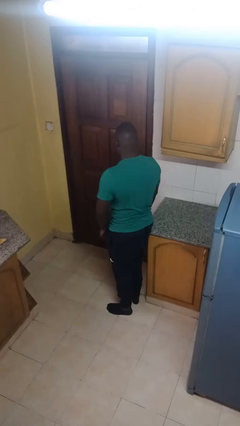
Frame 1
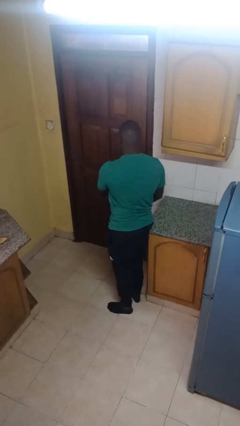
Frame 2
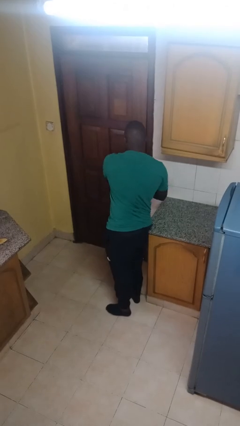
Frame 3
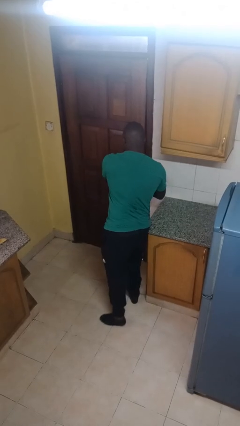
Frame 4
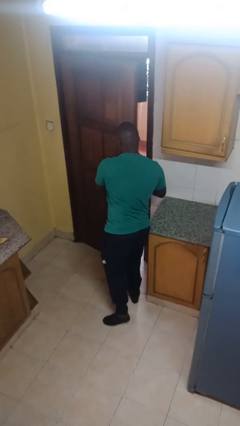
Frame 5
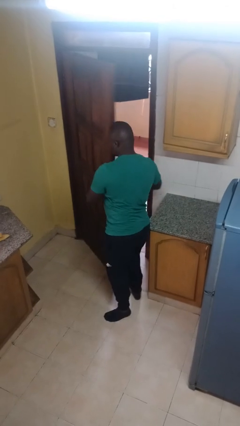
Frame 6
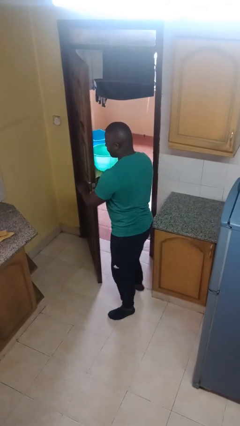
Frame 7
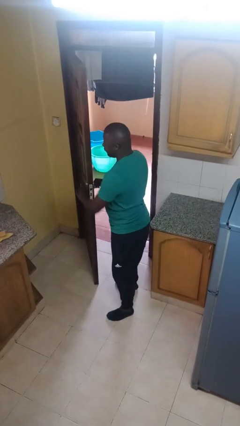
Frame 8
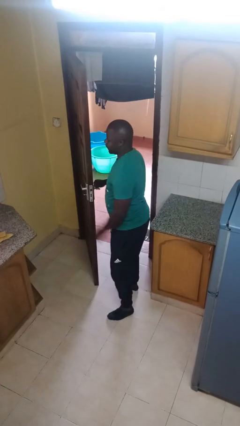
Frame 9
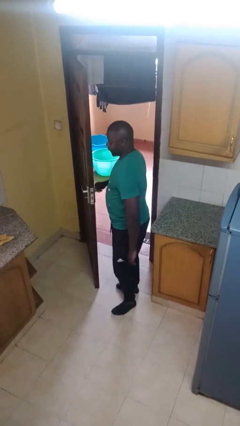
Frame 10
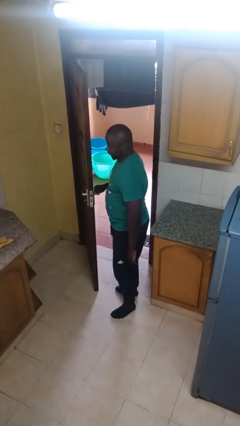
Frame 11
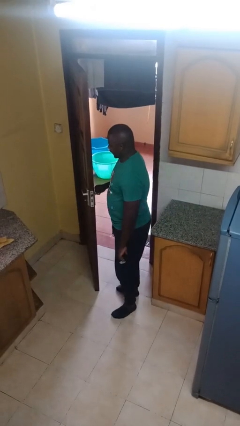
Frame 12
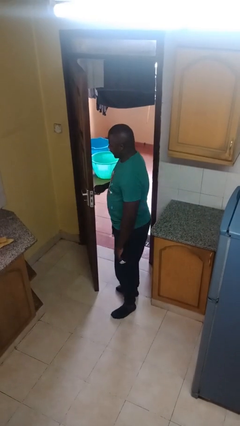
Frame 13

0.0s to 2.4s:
person opens facility door

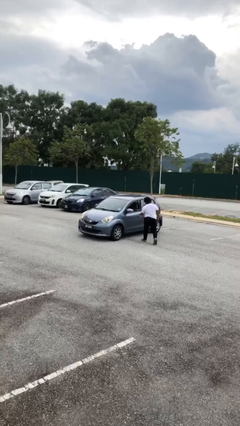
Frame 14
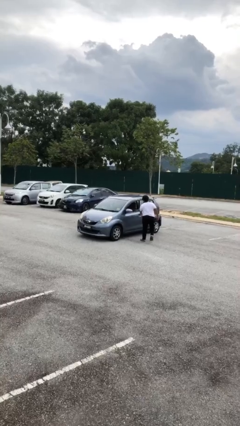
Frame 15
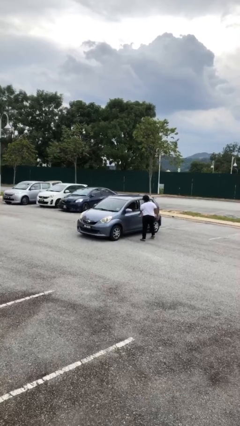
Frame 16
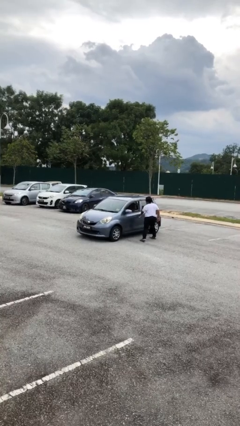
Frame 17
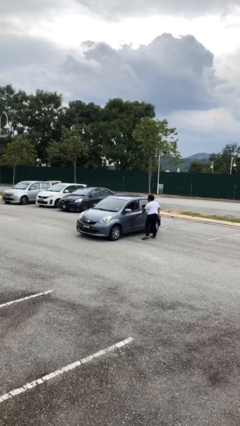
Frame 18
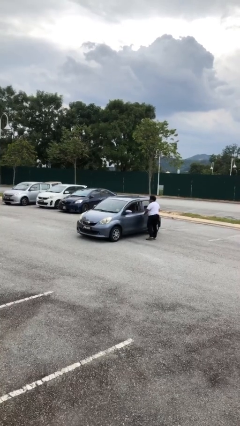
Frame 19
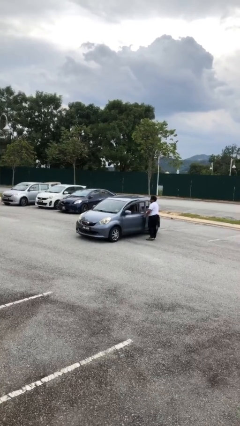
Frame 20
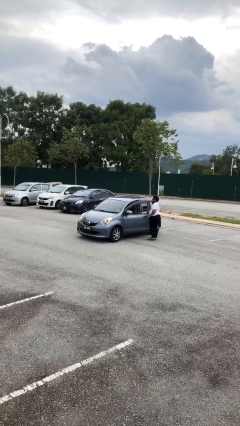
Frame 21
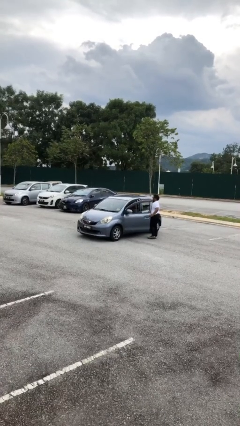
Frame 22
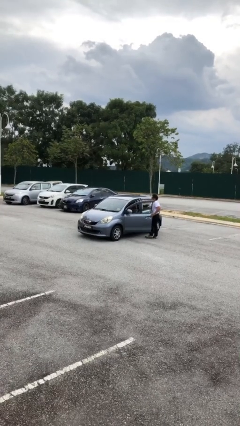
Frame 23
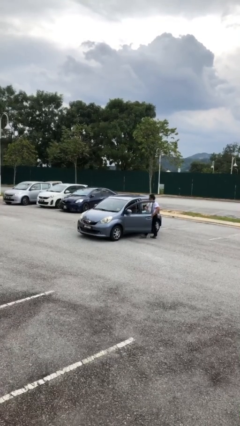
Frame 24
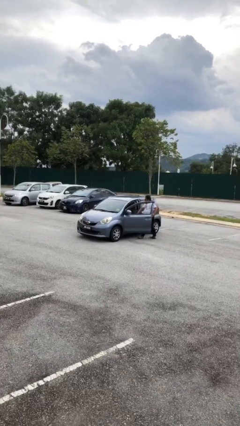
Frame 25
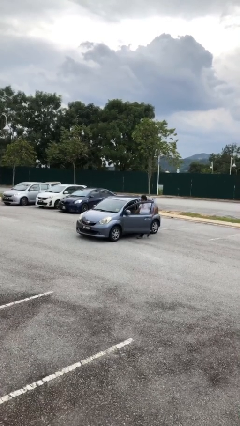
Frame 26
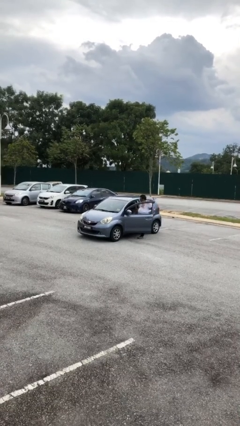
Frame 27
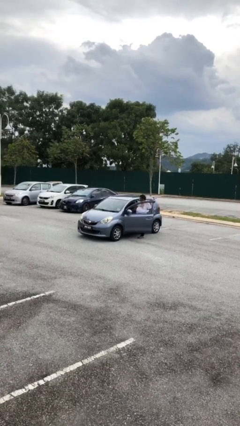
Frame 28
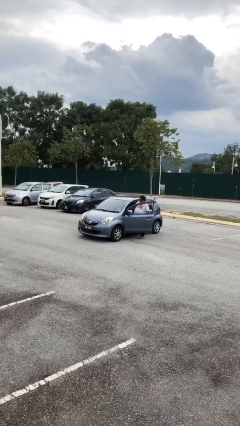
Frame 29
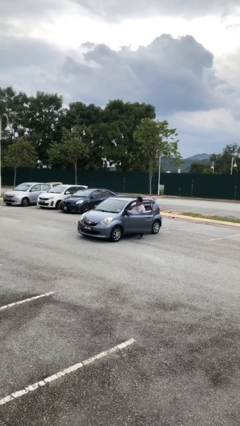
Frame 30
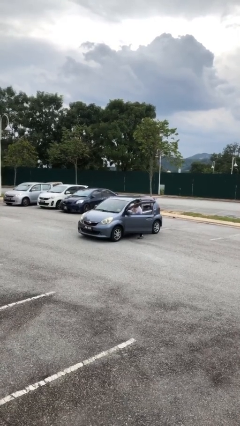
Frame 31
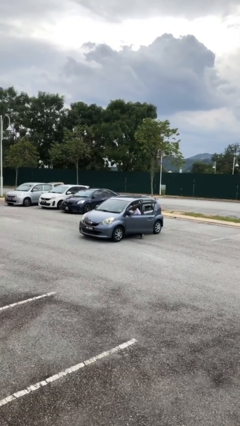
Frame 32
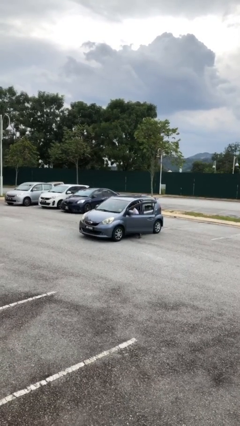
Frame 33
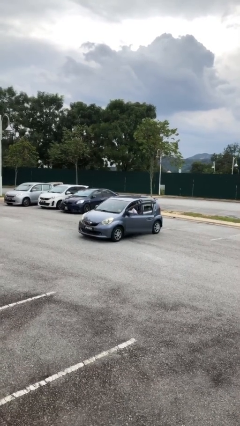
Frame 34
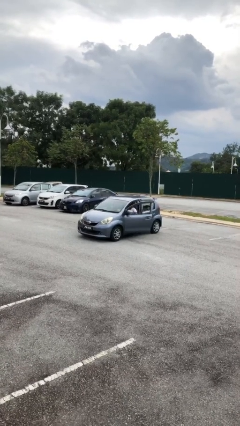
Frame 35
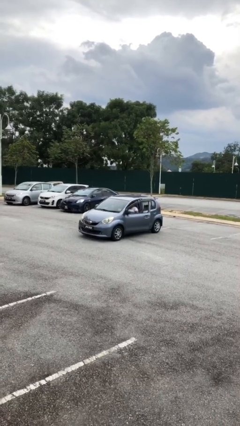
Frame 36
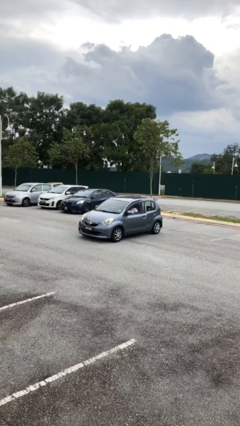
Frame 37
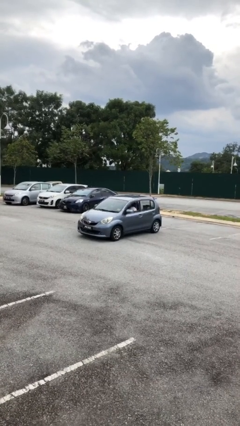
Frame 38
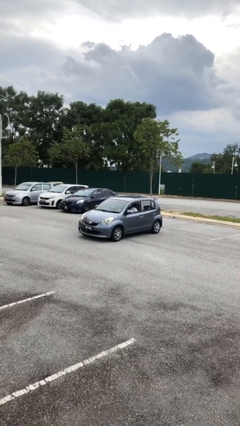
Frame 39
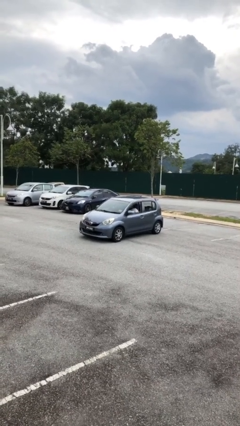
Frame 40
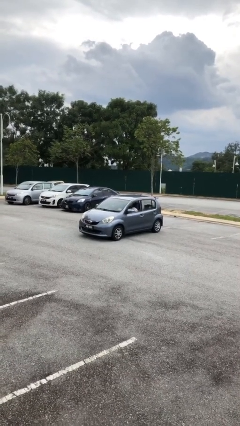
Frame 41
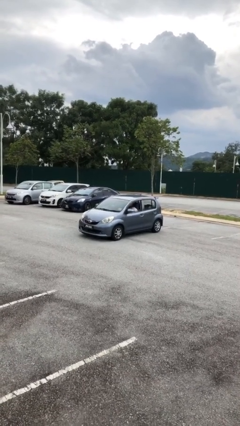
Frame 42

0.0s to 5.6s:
car picks up person

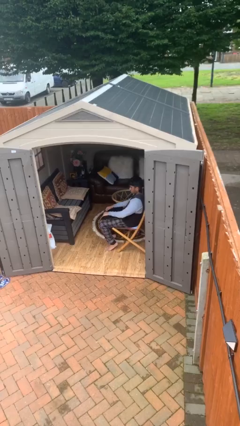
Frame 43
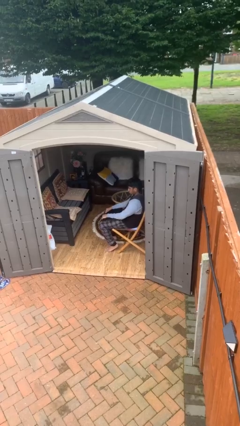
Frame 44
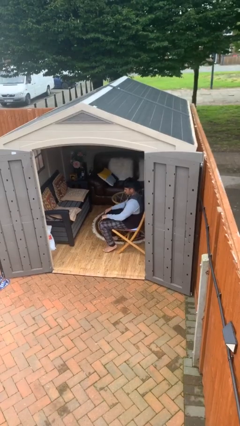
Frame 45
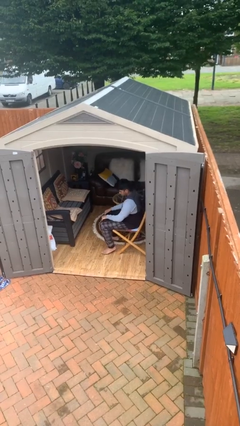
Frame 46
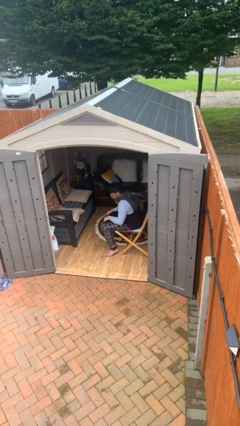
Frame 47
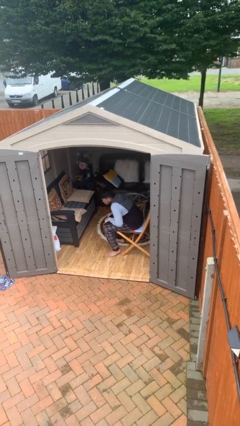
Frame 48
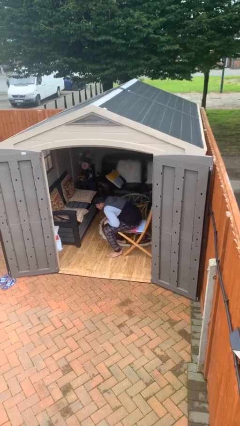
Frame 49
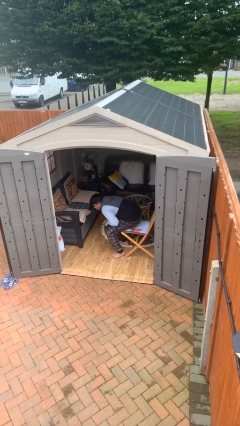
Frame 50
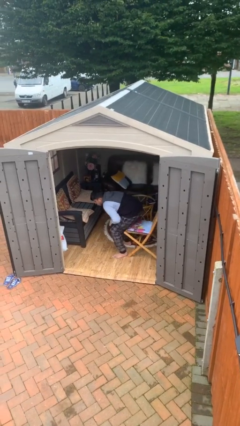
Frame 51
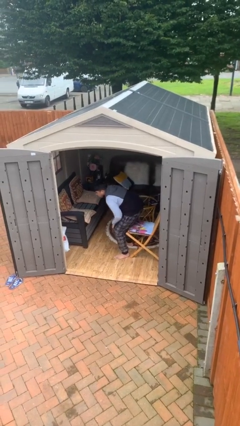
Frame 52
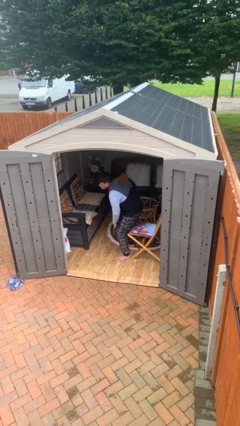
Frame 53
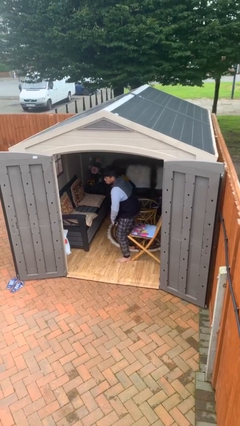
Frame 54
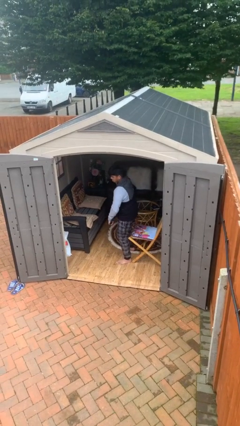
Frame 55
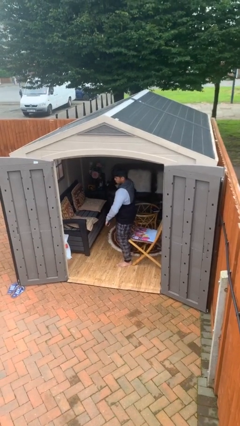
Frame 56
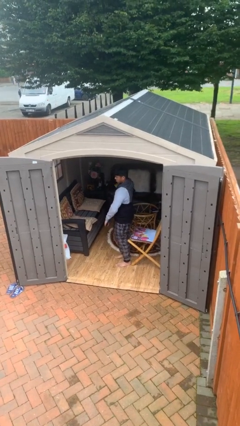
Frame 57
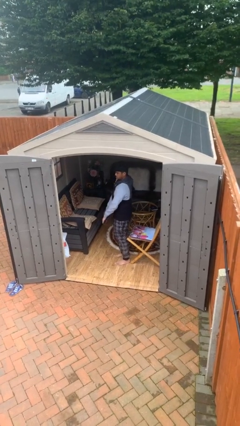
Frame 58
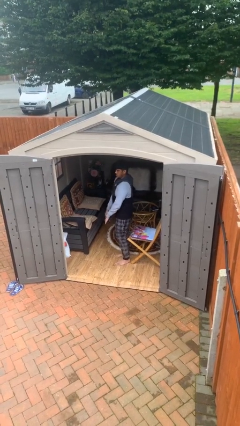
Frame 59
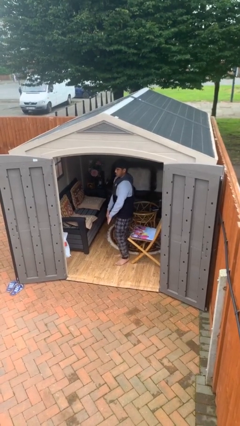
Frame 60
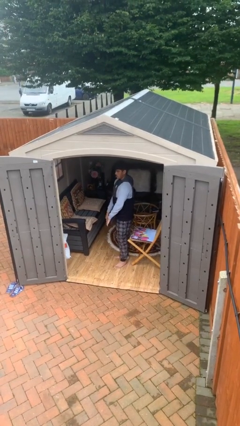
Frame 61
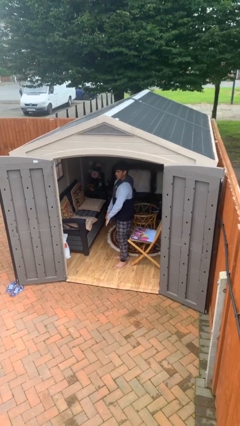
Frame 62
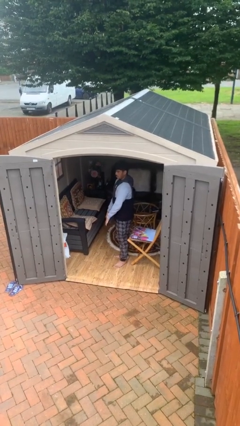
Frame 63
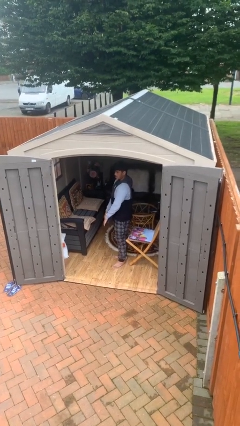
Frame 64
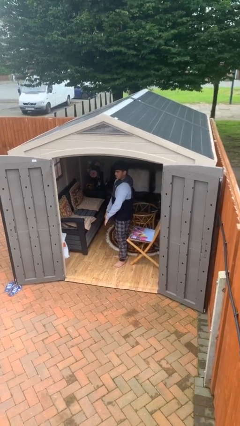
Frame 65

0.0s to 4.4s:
person stands up

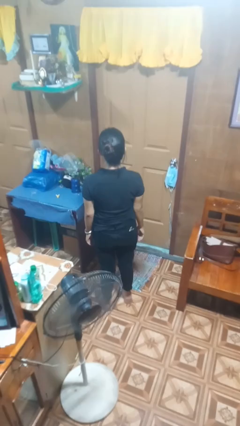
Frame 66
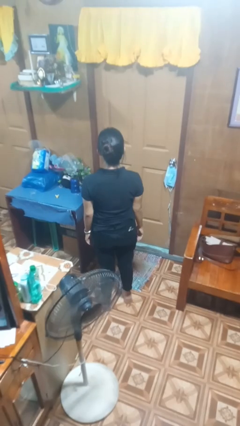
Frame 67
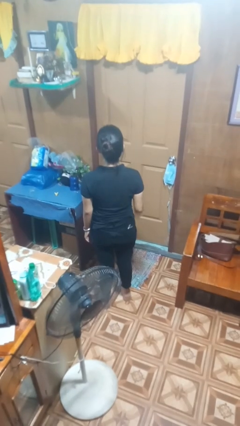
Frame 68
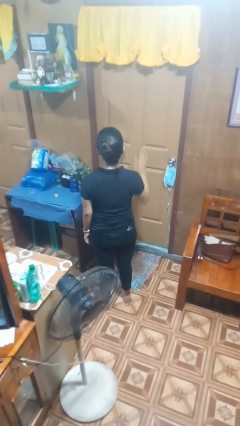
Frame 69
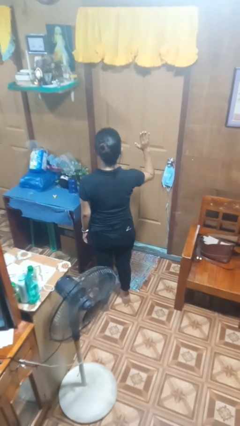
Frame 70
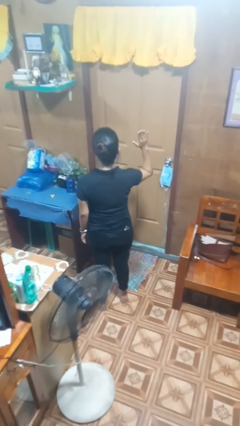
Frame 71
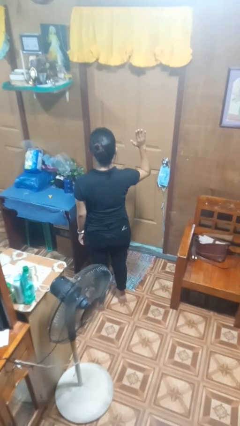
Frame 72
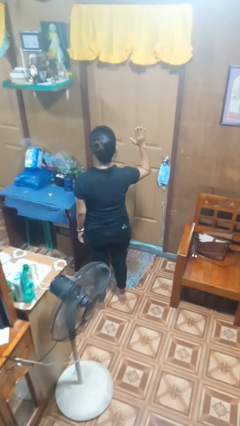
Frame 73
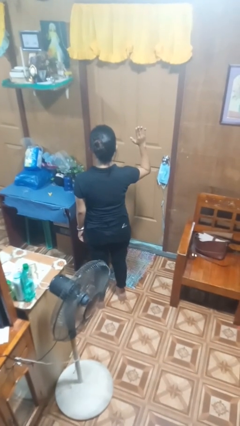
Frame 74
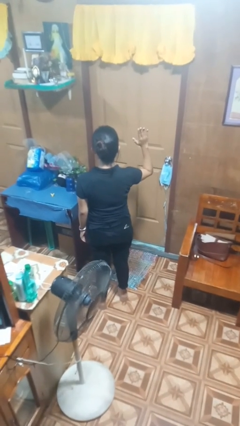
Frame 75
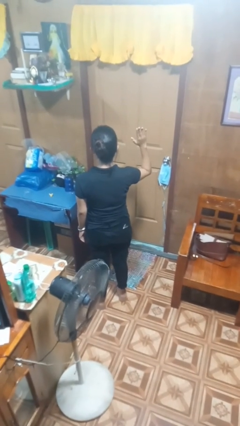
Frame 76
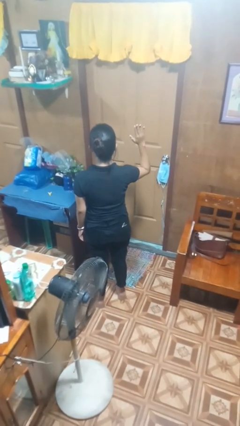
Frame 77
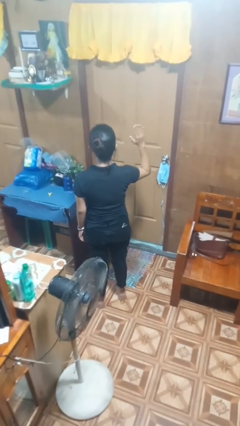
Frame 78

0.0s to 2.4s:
person gestures raise hand

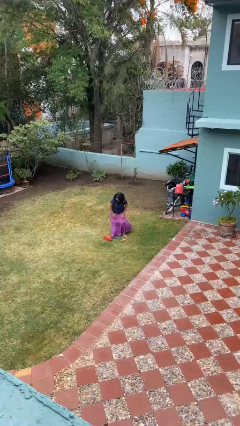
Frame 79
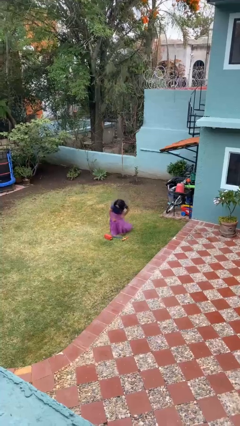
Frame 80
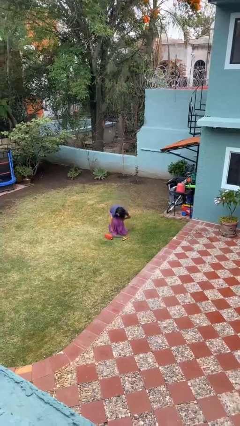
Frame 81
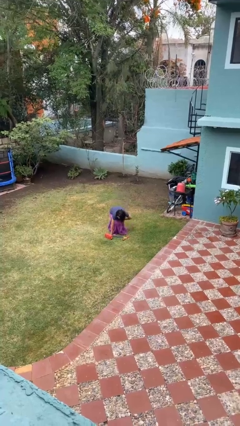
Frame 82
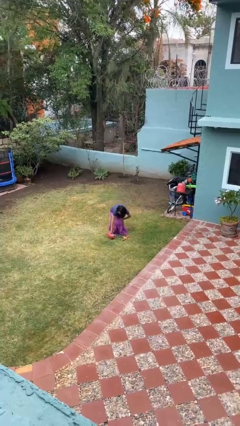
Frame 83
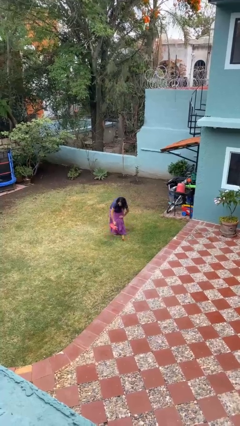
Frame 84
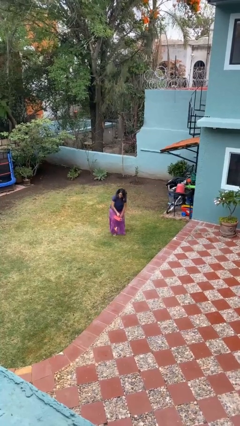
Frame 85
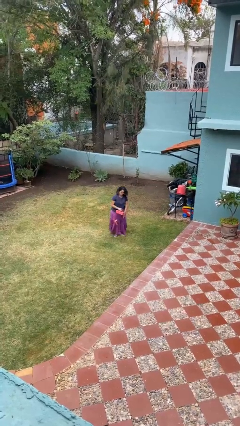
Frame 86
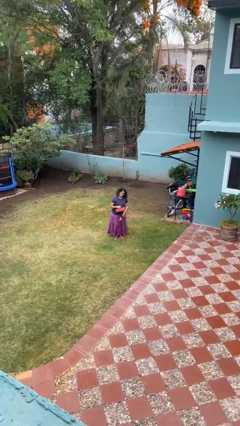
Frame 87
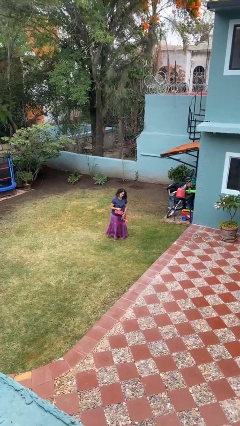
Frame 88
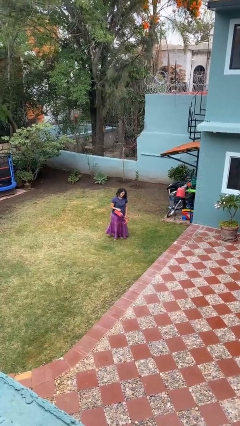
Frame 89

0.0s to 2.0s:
person picks up object from floor

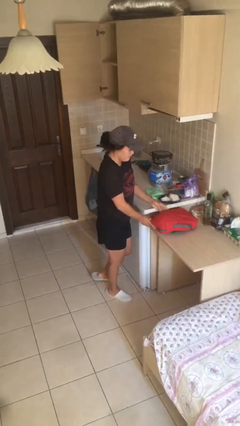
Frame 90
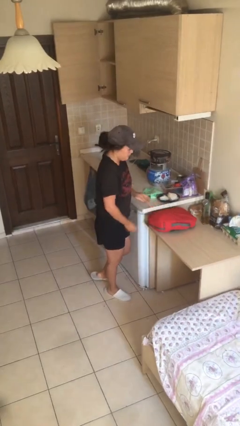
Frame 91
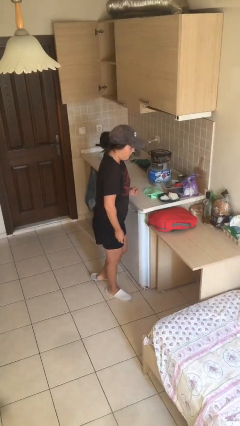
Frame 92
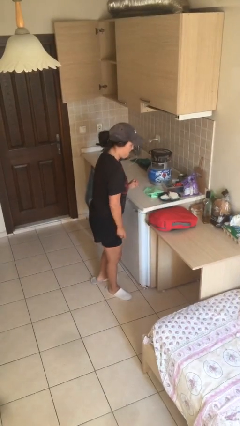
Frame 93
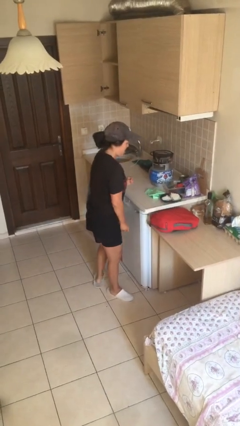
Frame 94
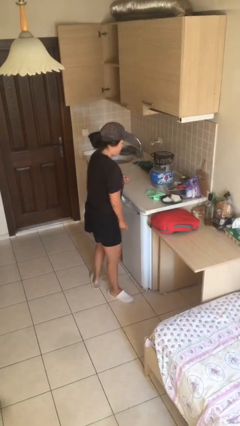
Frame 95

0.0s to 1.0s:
person puts down object on table
